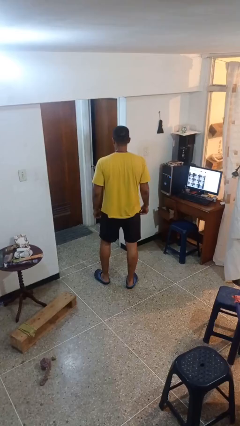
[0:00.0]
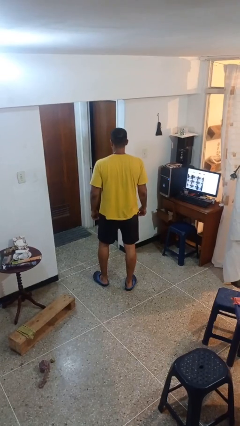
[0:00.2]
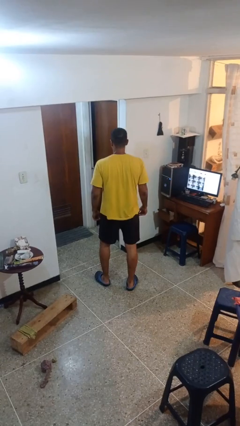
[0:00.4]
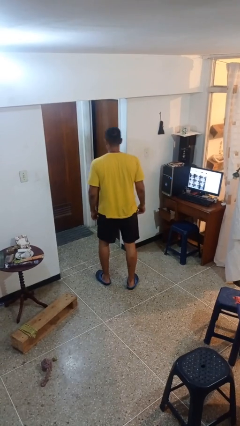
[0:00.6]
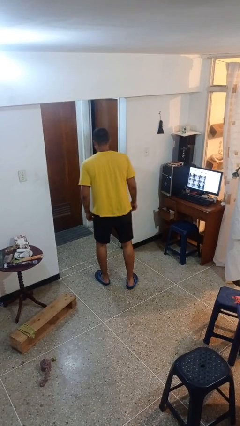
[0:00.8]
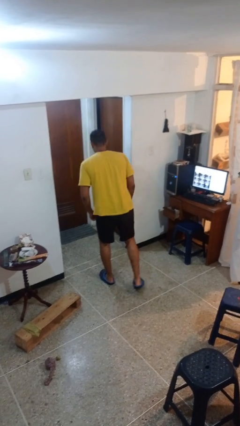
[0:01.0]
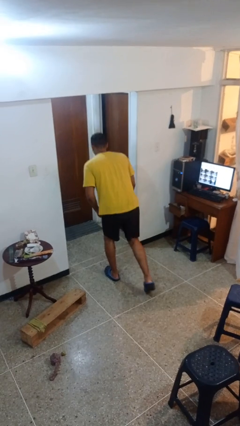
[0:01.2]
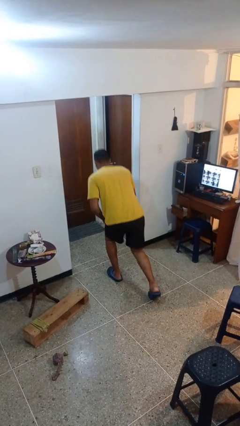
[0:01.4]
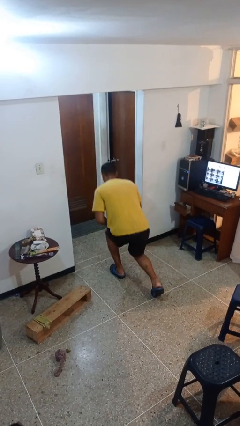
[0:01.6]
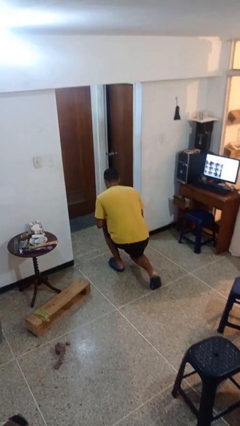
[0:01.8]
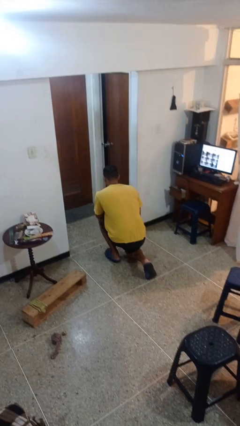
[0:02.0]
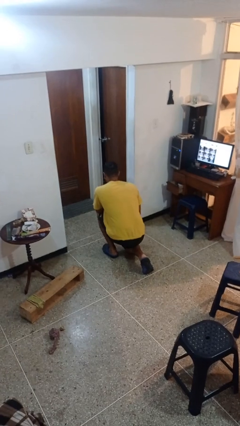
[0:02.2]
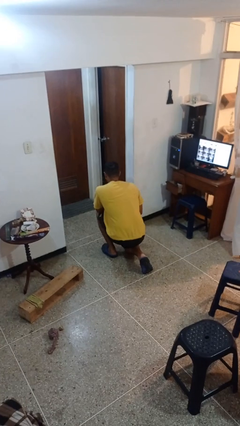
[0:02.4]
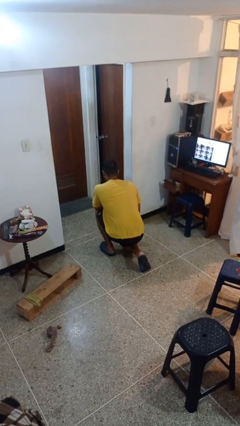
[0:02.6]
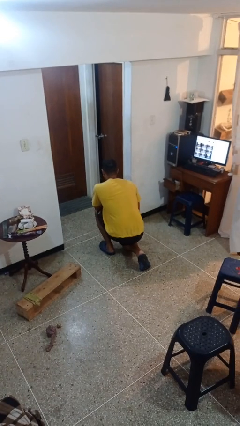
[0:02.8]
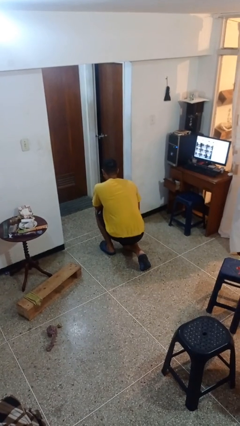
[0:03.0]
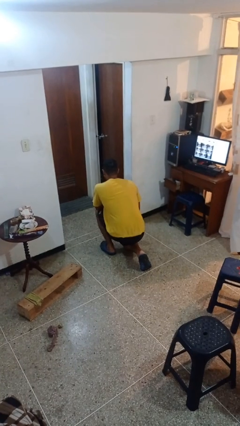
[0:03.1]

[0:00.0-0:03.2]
person kneels

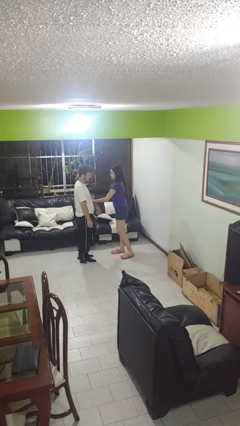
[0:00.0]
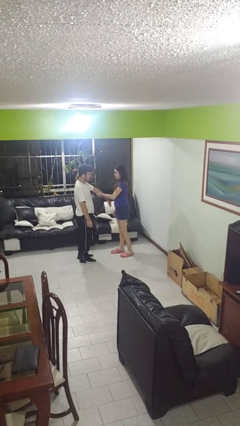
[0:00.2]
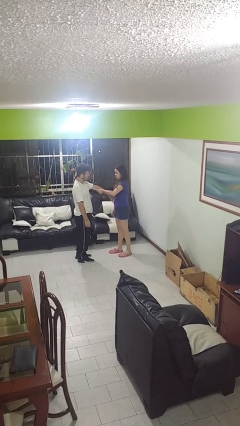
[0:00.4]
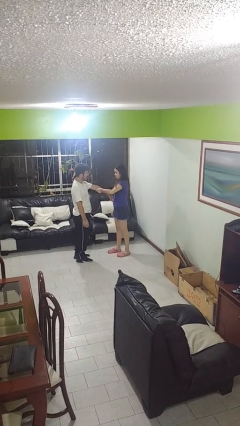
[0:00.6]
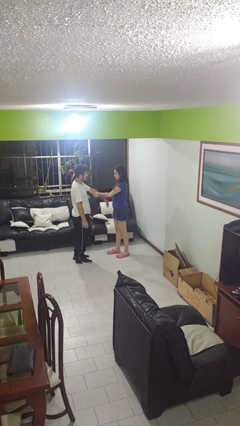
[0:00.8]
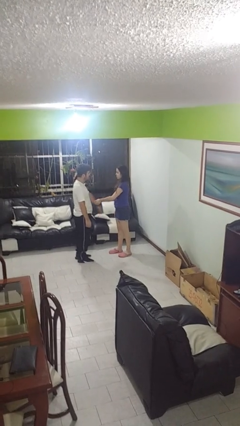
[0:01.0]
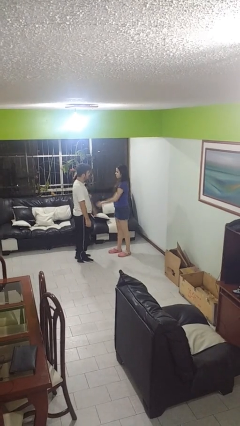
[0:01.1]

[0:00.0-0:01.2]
person grabs person by forearm

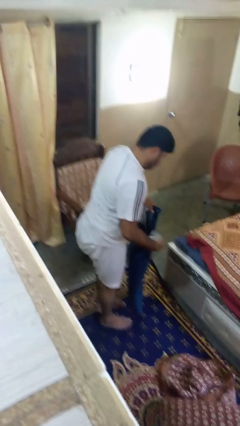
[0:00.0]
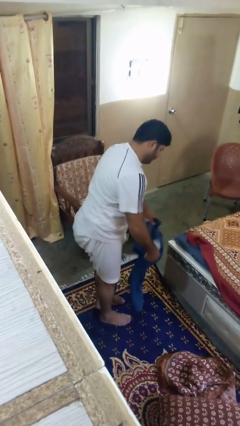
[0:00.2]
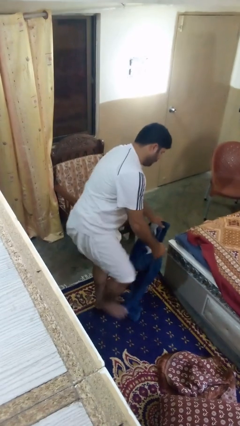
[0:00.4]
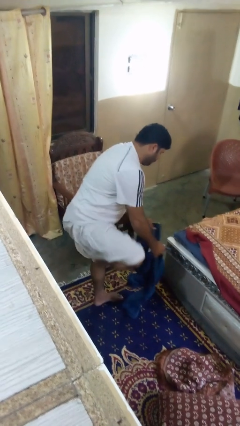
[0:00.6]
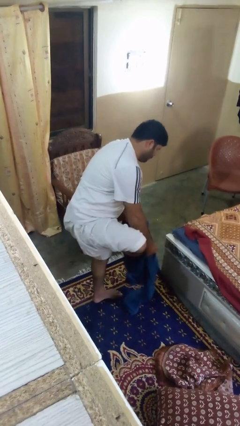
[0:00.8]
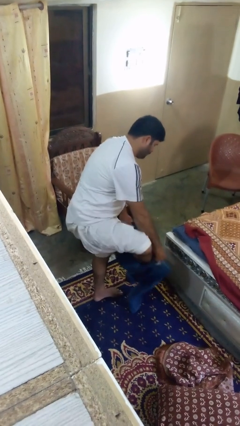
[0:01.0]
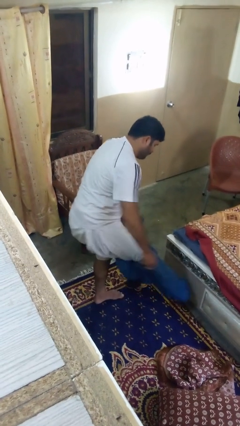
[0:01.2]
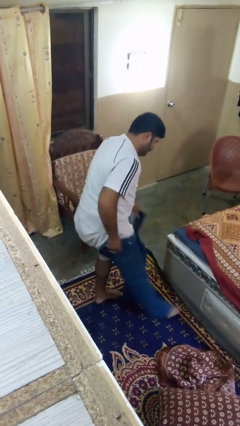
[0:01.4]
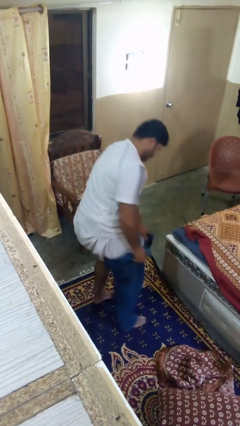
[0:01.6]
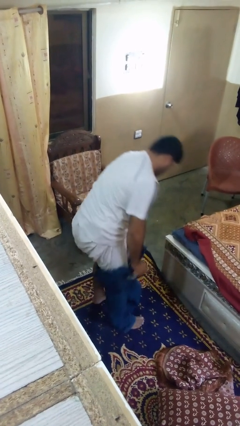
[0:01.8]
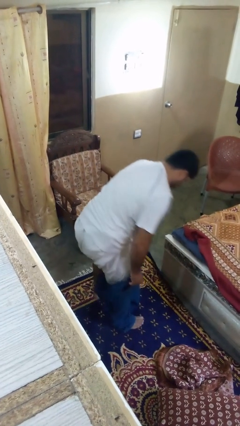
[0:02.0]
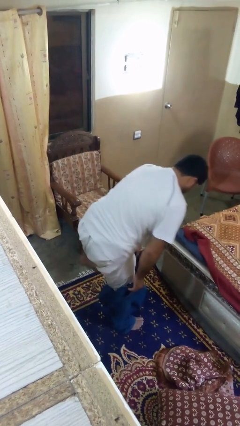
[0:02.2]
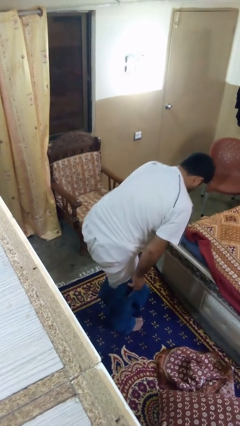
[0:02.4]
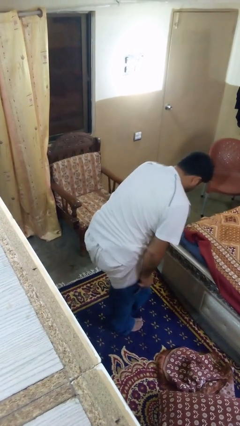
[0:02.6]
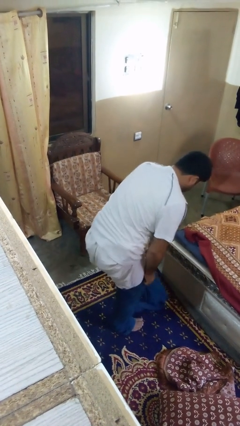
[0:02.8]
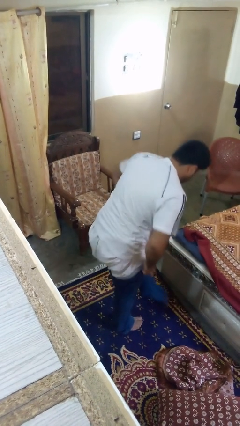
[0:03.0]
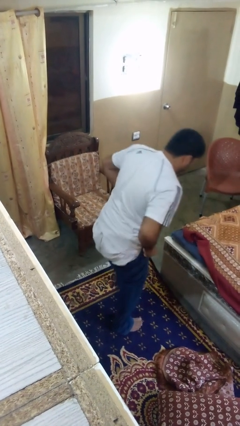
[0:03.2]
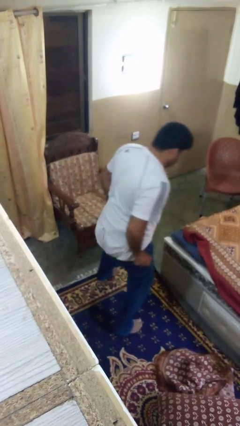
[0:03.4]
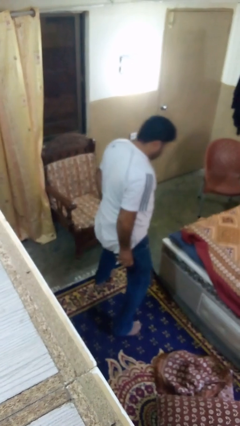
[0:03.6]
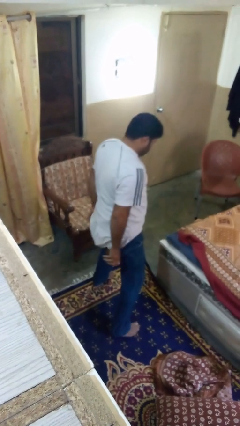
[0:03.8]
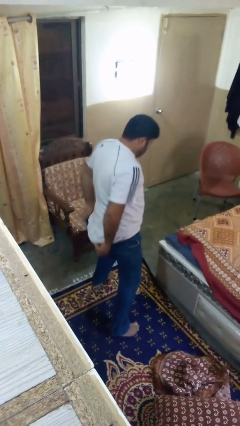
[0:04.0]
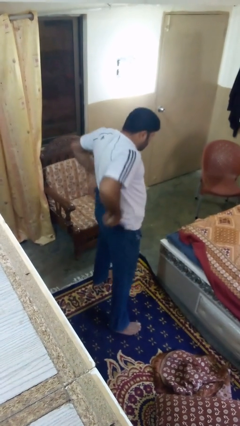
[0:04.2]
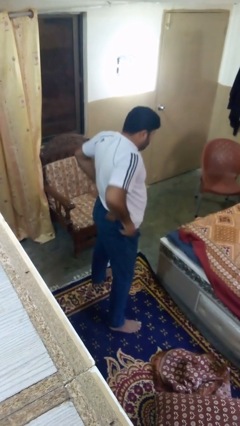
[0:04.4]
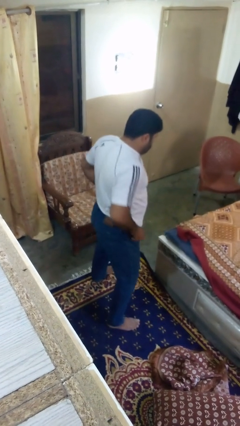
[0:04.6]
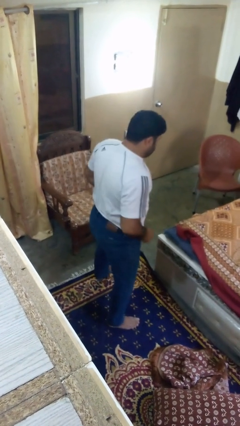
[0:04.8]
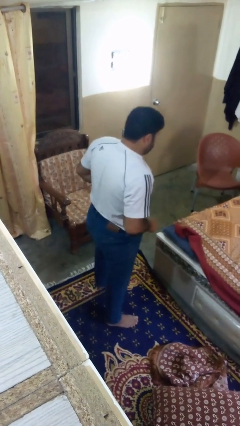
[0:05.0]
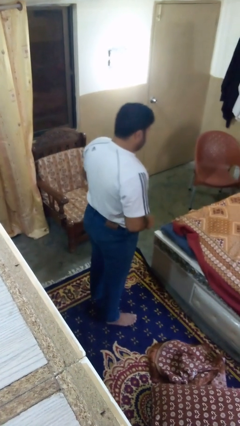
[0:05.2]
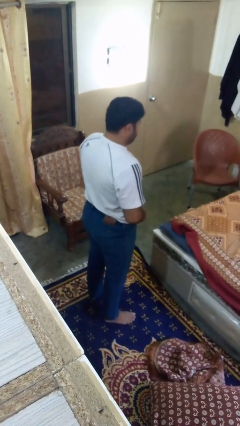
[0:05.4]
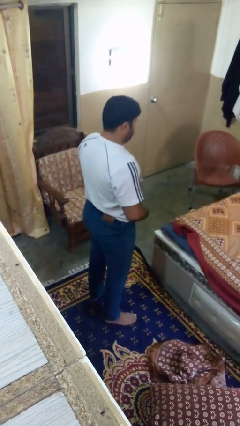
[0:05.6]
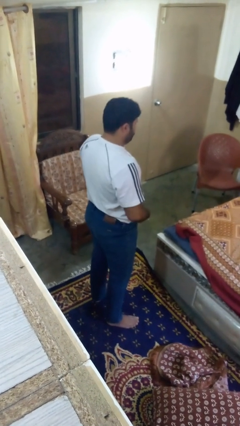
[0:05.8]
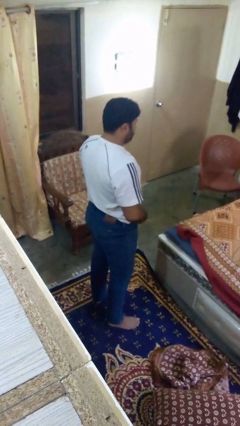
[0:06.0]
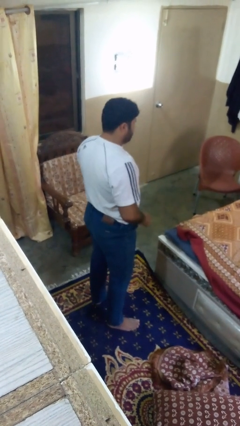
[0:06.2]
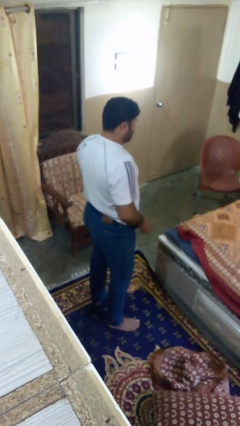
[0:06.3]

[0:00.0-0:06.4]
person puts on pants

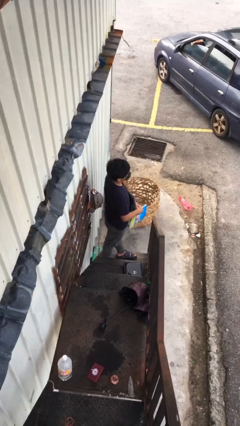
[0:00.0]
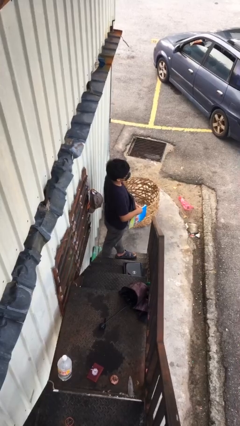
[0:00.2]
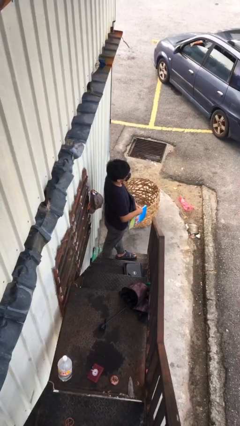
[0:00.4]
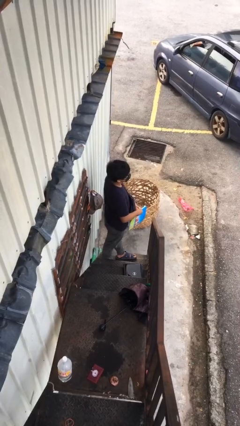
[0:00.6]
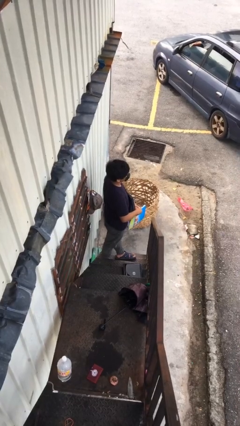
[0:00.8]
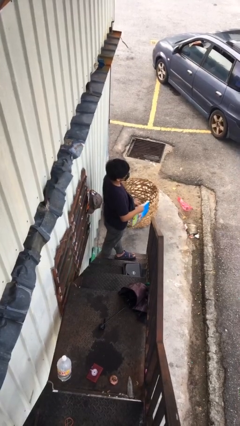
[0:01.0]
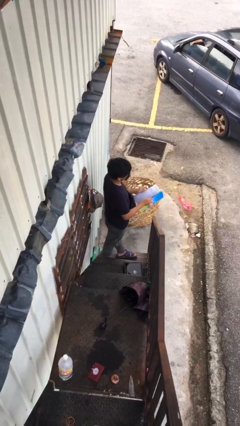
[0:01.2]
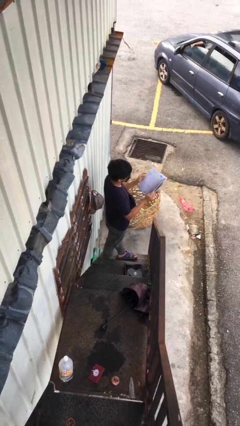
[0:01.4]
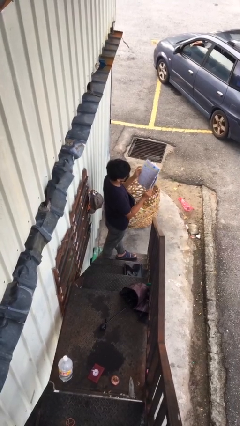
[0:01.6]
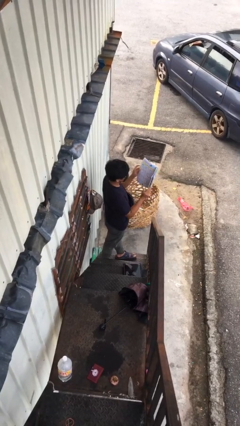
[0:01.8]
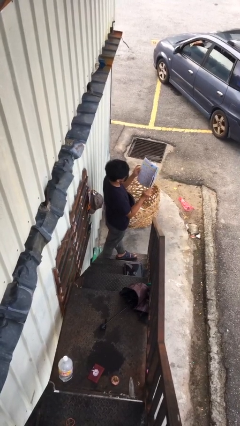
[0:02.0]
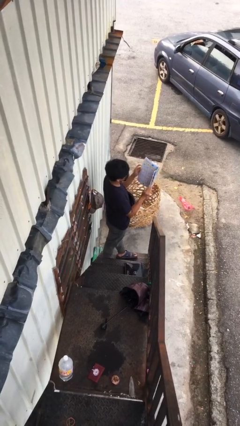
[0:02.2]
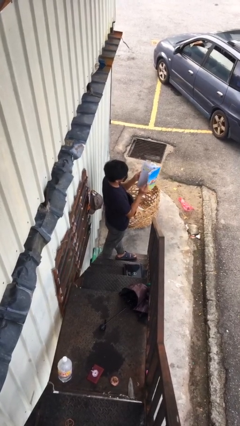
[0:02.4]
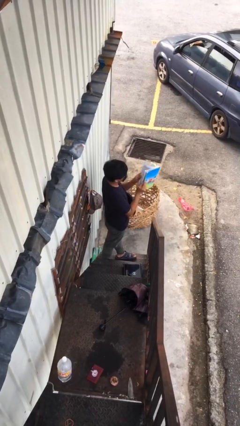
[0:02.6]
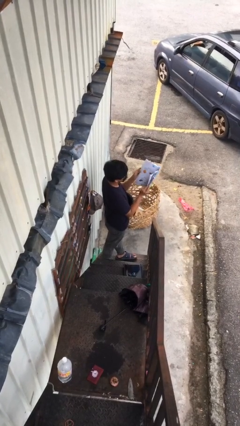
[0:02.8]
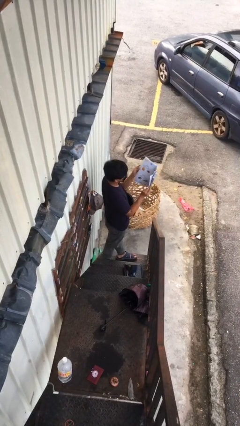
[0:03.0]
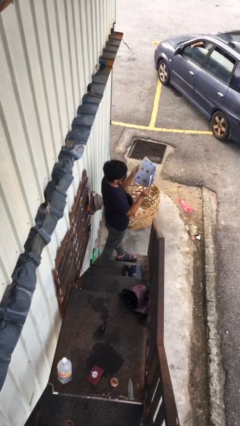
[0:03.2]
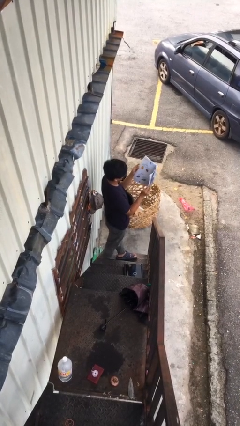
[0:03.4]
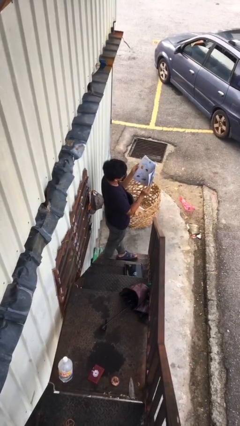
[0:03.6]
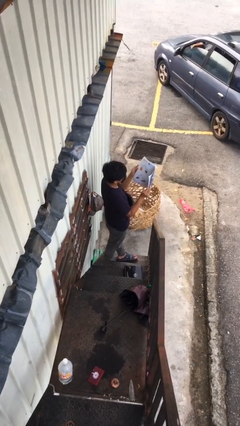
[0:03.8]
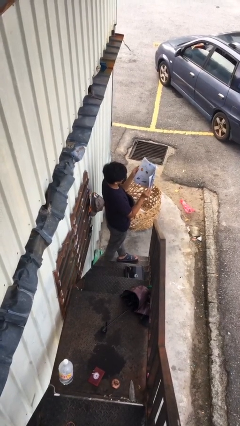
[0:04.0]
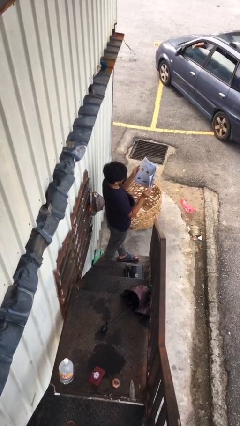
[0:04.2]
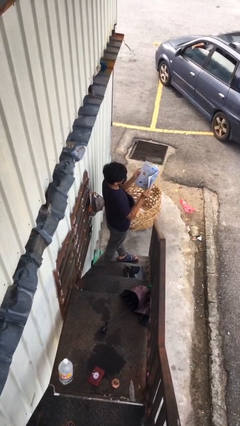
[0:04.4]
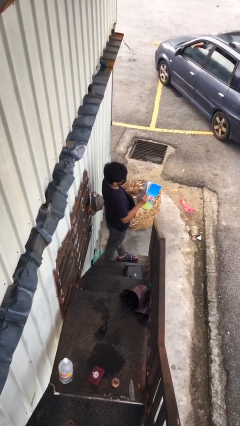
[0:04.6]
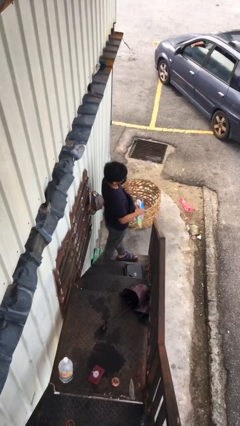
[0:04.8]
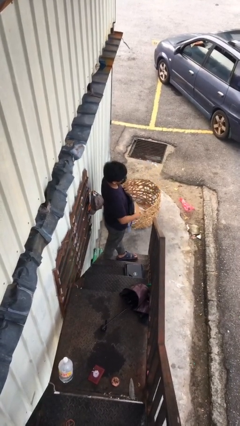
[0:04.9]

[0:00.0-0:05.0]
person reads document

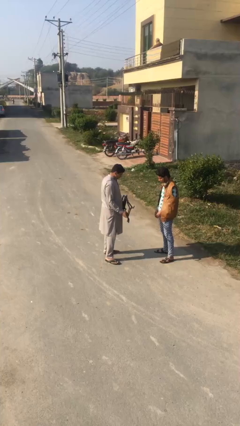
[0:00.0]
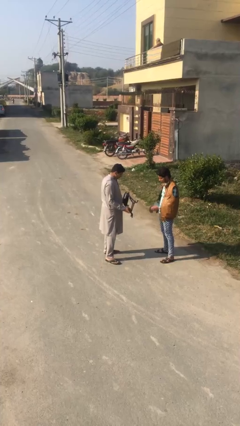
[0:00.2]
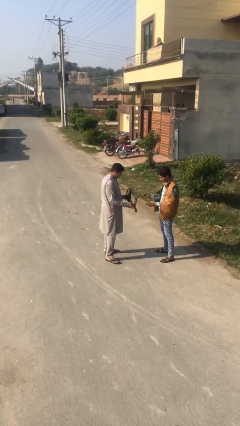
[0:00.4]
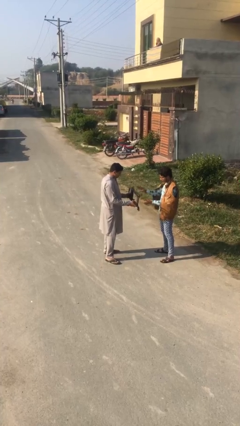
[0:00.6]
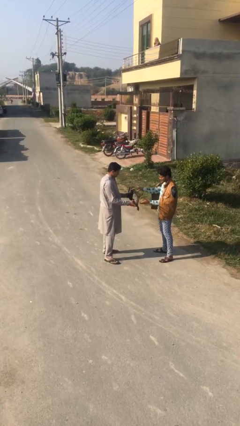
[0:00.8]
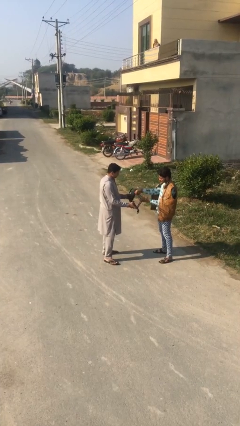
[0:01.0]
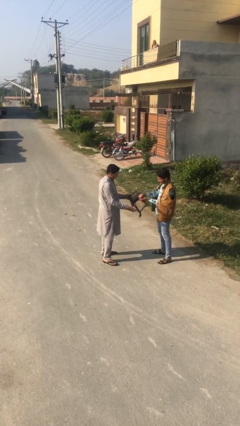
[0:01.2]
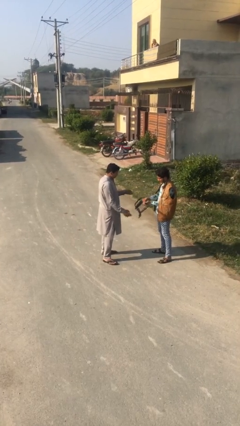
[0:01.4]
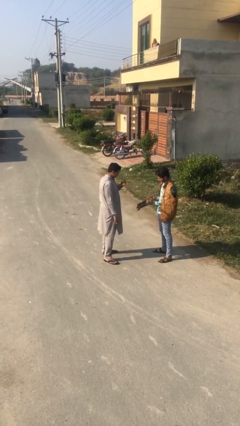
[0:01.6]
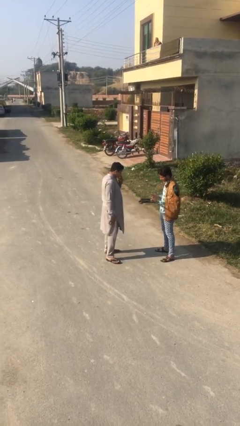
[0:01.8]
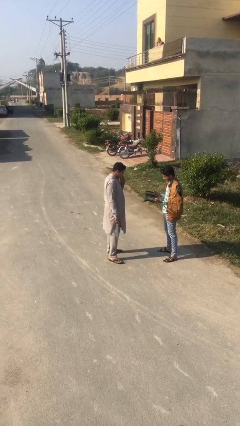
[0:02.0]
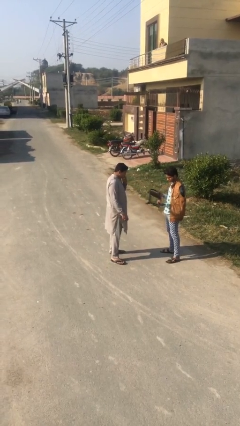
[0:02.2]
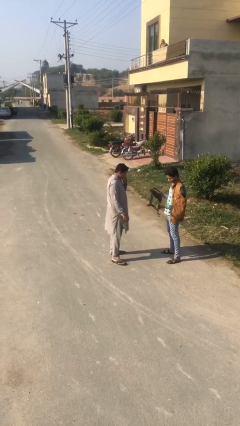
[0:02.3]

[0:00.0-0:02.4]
person transfers object to person
